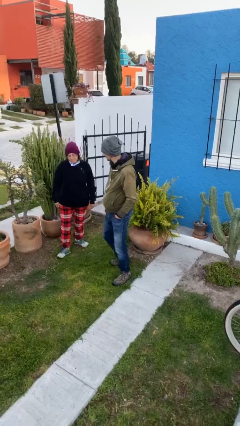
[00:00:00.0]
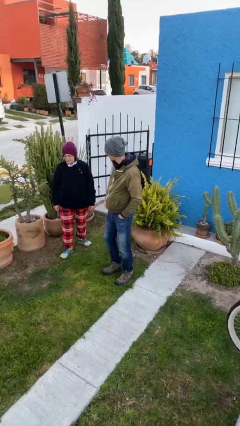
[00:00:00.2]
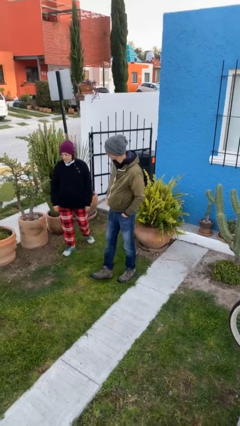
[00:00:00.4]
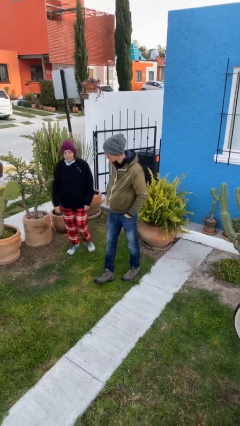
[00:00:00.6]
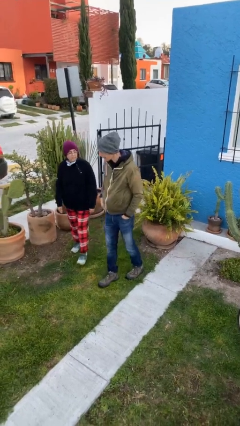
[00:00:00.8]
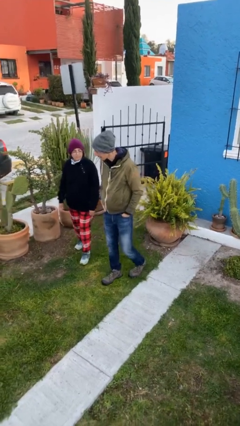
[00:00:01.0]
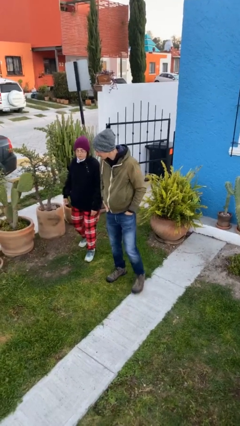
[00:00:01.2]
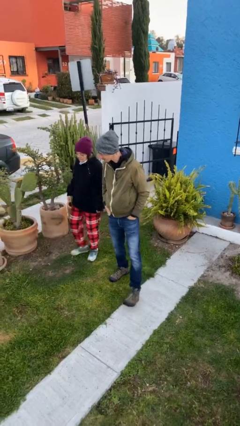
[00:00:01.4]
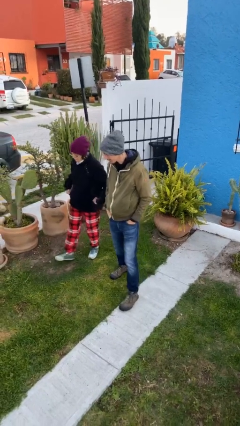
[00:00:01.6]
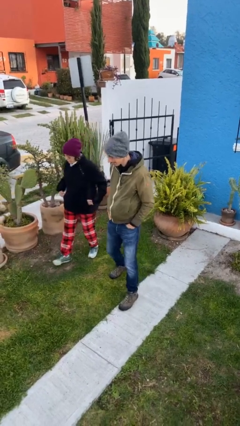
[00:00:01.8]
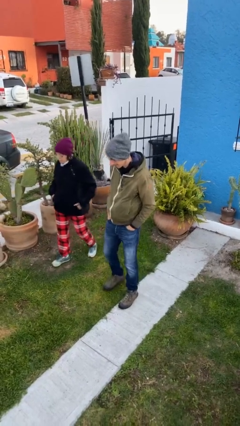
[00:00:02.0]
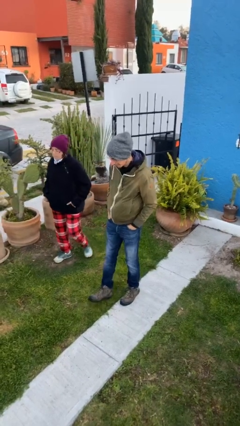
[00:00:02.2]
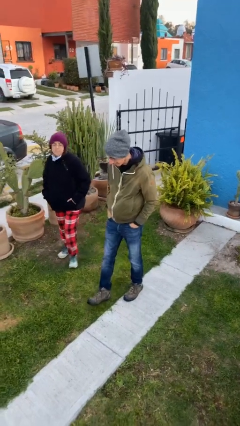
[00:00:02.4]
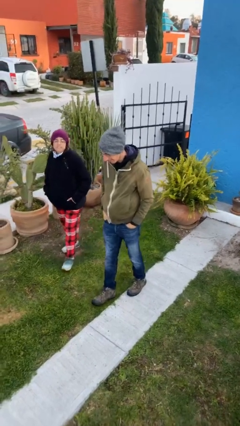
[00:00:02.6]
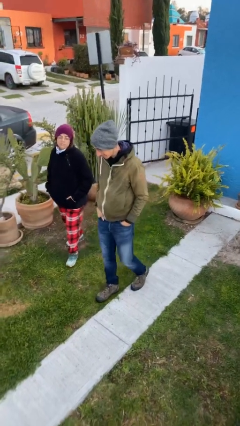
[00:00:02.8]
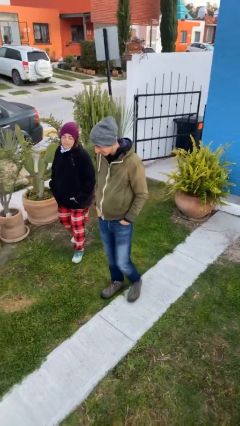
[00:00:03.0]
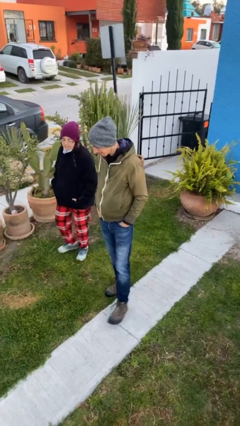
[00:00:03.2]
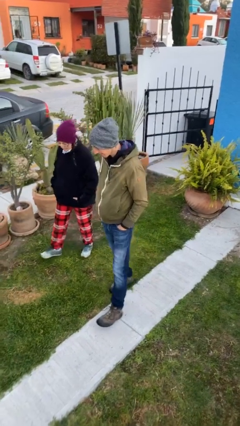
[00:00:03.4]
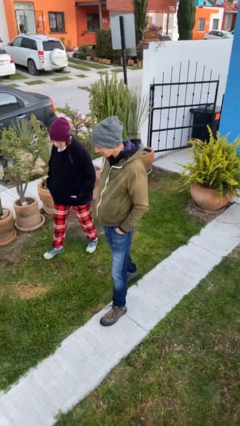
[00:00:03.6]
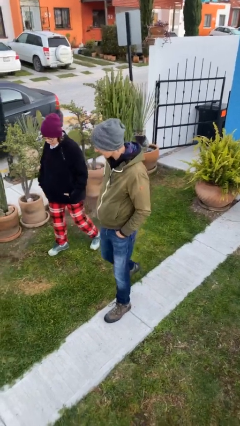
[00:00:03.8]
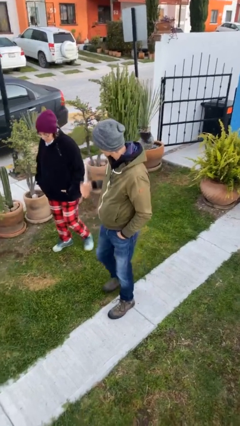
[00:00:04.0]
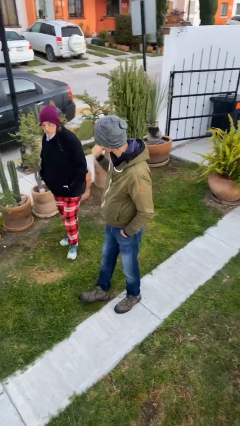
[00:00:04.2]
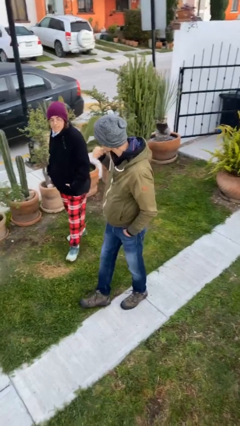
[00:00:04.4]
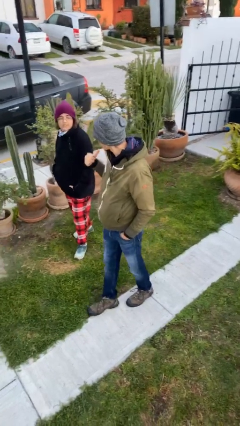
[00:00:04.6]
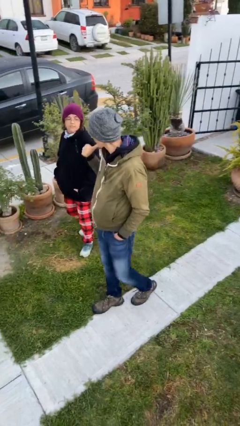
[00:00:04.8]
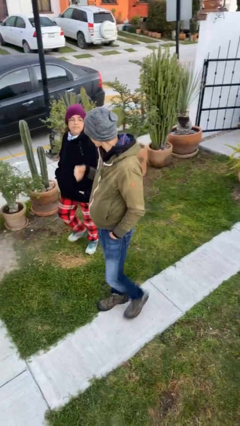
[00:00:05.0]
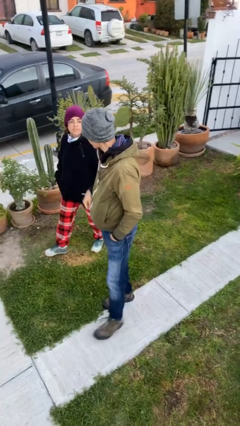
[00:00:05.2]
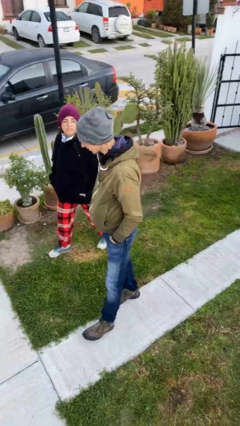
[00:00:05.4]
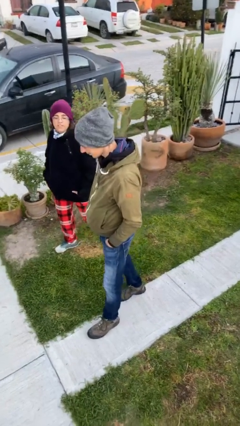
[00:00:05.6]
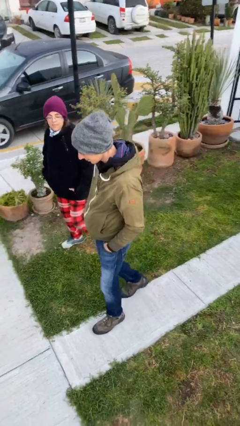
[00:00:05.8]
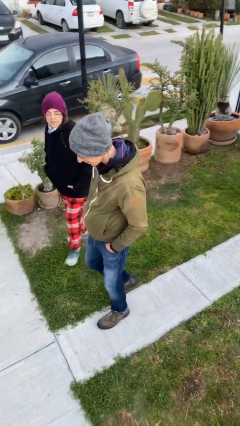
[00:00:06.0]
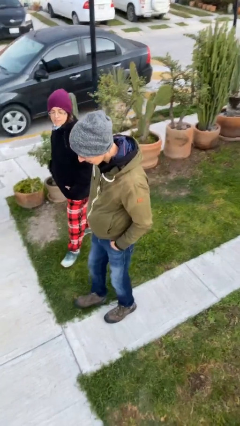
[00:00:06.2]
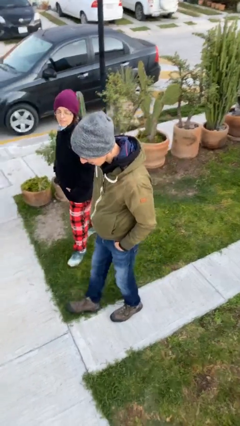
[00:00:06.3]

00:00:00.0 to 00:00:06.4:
person talks to person

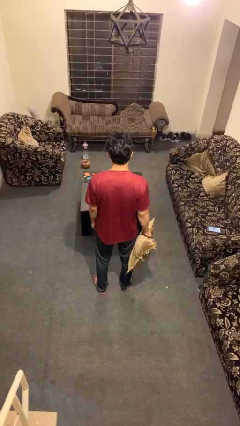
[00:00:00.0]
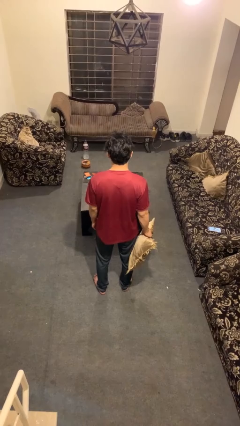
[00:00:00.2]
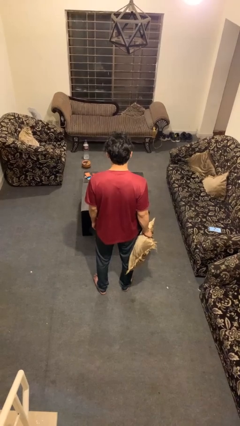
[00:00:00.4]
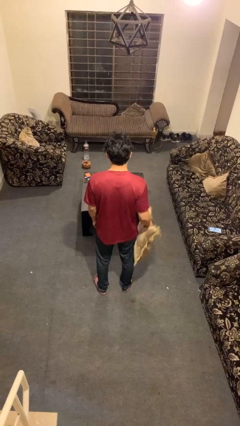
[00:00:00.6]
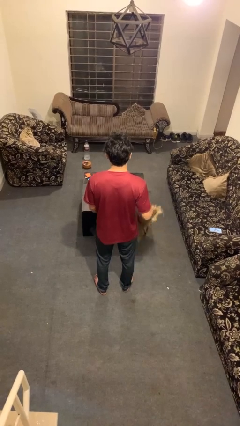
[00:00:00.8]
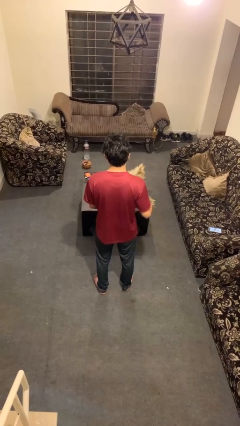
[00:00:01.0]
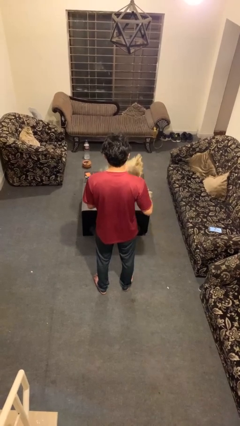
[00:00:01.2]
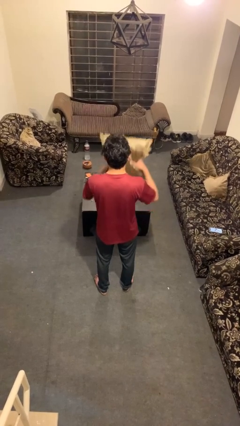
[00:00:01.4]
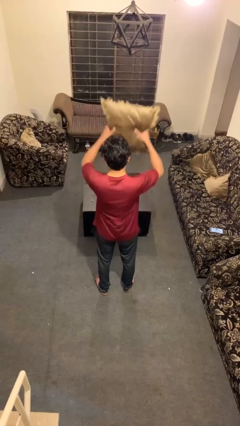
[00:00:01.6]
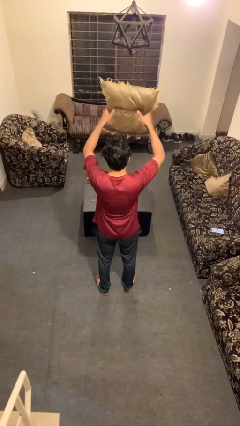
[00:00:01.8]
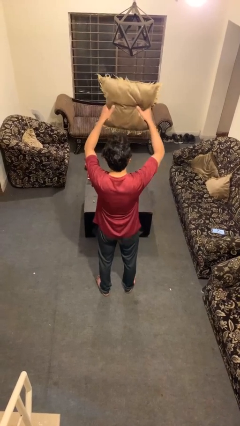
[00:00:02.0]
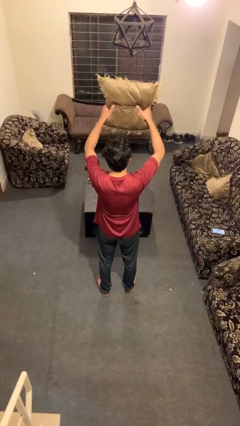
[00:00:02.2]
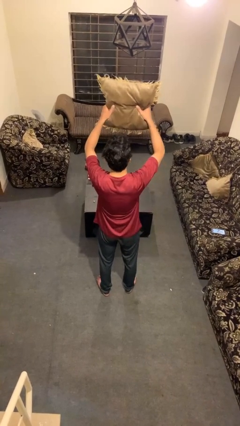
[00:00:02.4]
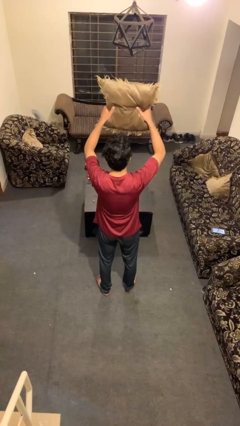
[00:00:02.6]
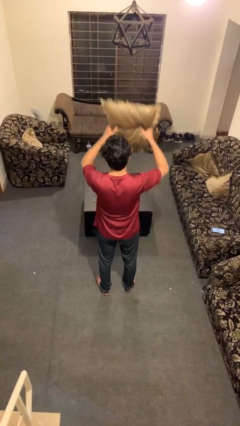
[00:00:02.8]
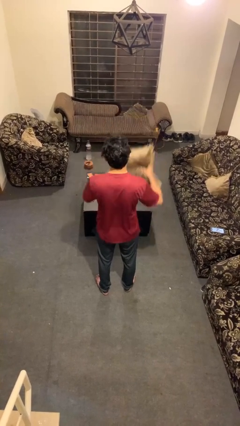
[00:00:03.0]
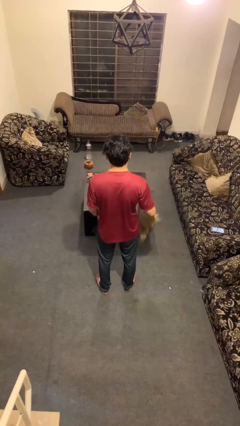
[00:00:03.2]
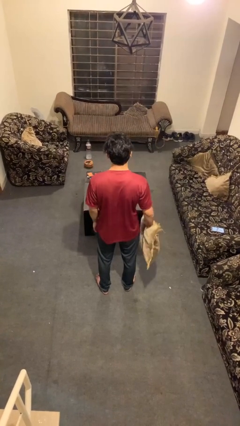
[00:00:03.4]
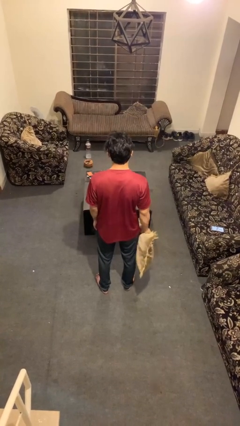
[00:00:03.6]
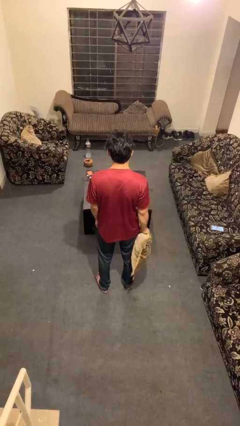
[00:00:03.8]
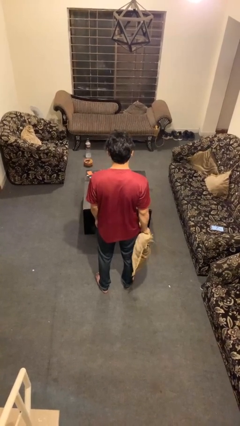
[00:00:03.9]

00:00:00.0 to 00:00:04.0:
person holds object above head

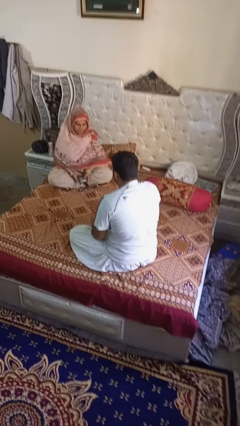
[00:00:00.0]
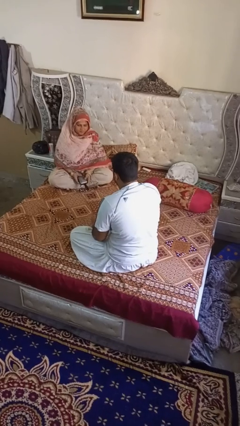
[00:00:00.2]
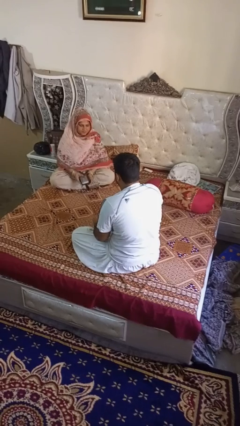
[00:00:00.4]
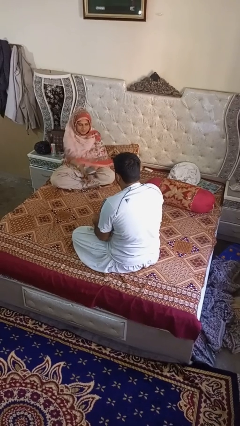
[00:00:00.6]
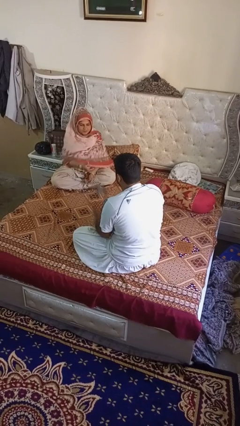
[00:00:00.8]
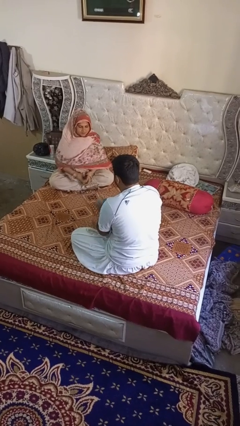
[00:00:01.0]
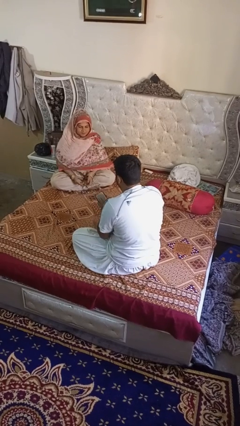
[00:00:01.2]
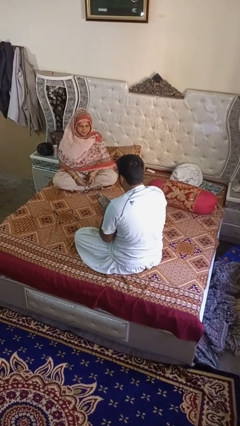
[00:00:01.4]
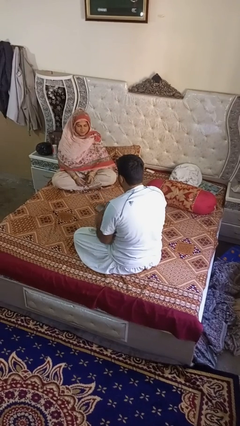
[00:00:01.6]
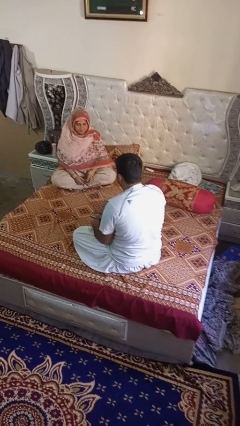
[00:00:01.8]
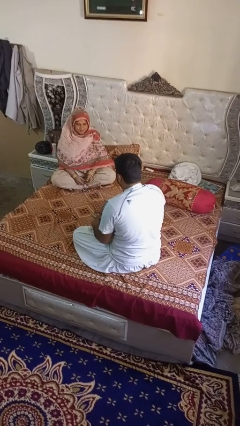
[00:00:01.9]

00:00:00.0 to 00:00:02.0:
person catches object from person

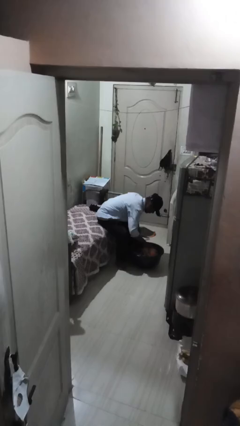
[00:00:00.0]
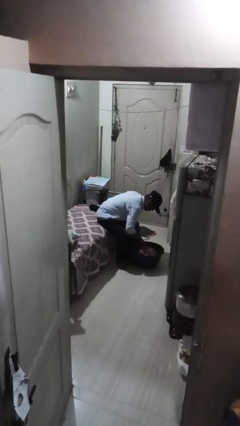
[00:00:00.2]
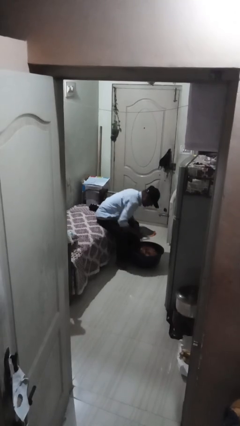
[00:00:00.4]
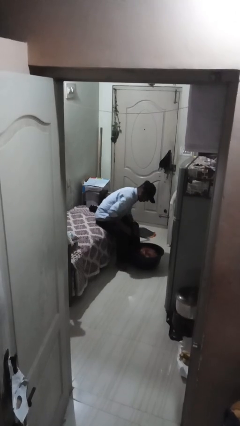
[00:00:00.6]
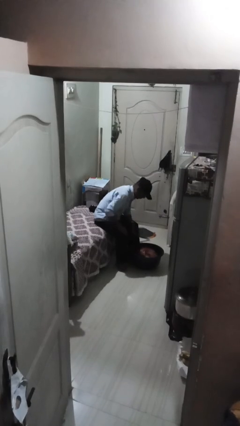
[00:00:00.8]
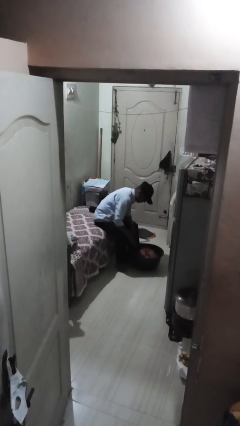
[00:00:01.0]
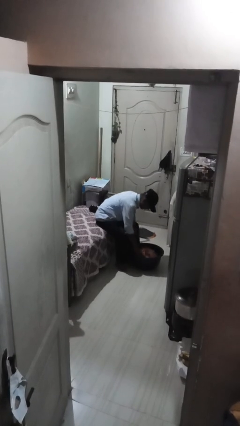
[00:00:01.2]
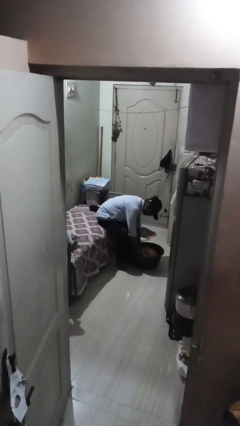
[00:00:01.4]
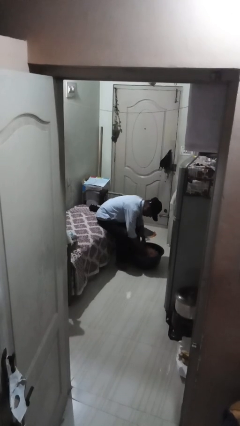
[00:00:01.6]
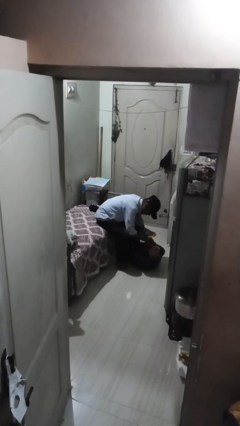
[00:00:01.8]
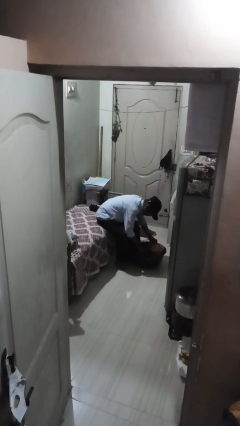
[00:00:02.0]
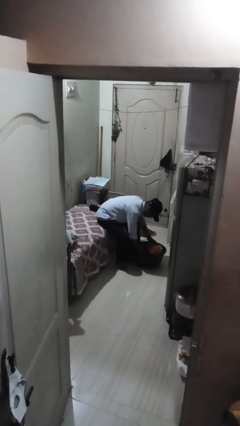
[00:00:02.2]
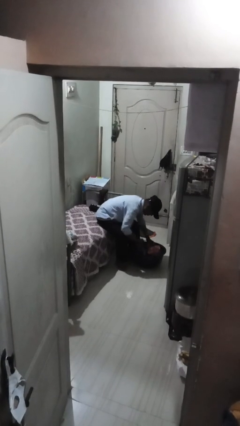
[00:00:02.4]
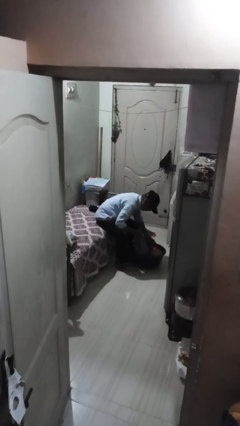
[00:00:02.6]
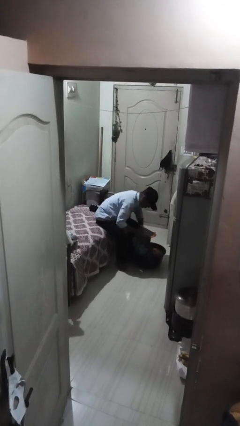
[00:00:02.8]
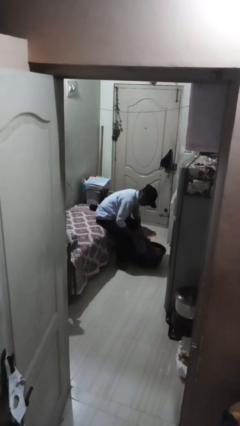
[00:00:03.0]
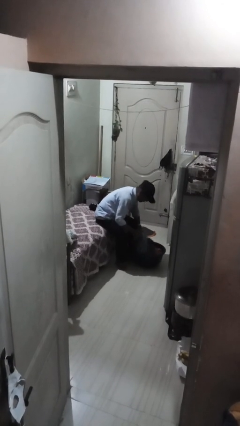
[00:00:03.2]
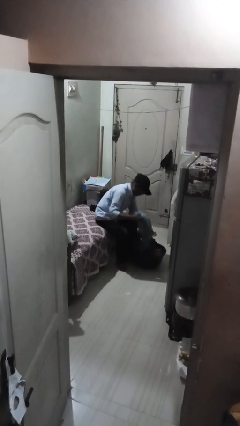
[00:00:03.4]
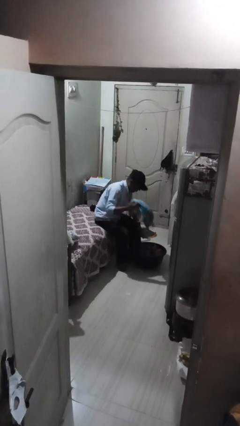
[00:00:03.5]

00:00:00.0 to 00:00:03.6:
person takes object from basket

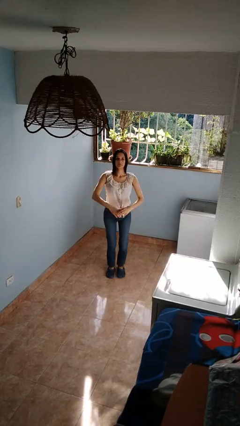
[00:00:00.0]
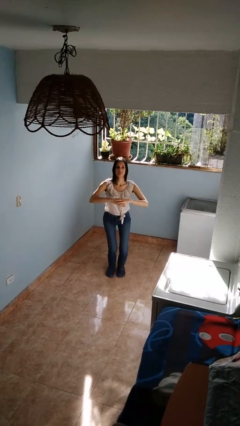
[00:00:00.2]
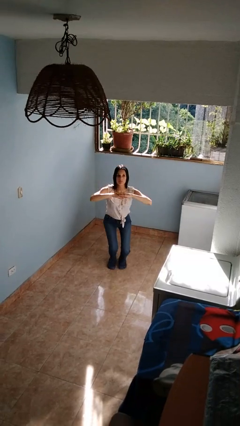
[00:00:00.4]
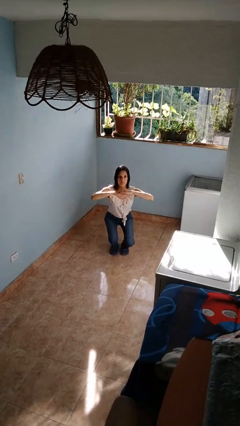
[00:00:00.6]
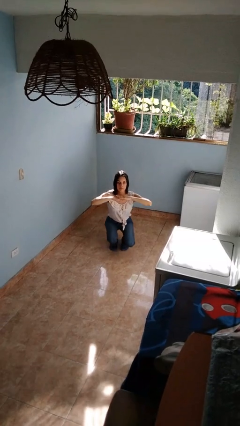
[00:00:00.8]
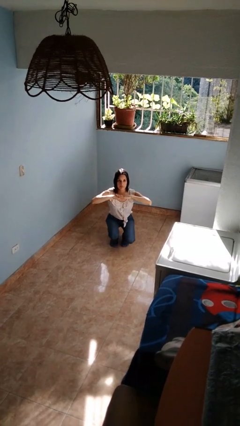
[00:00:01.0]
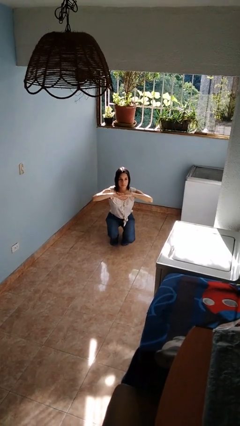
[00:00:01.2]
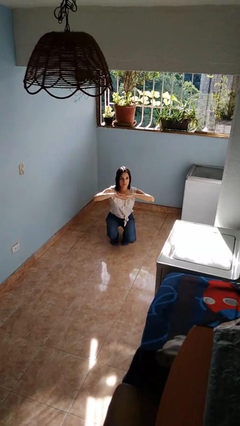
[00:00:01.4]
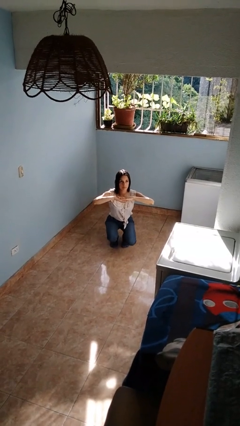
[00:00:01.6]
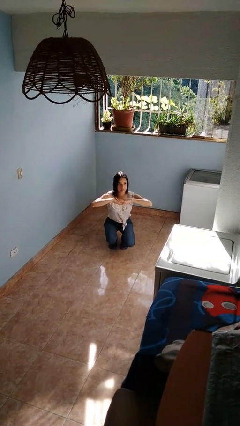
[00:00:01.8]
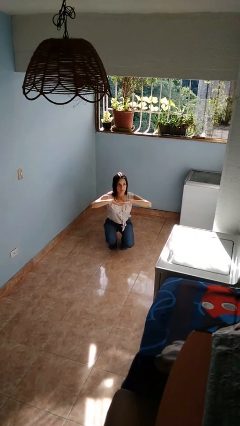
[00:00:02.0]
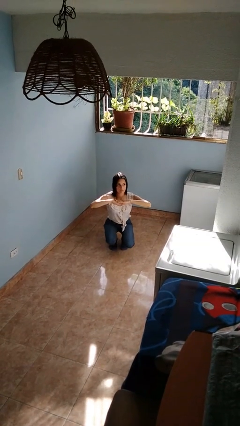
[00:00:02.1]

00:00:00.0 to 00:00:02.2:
person squats
